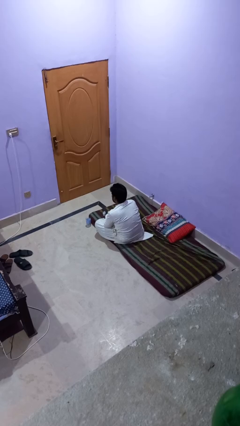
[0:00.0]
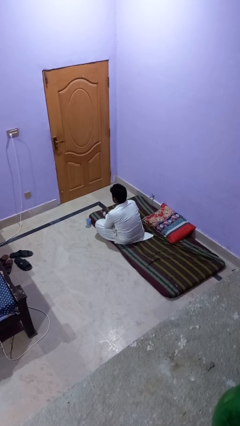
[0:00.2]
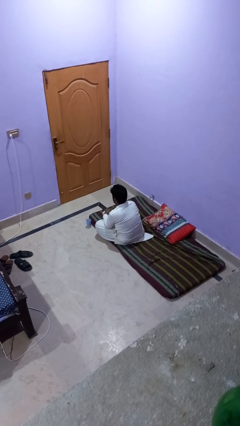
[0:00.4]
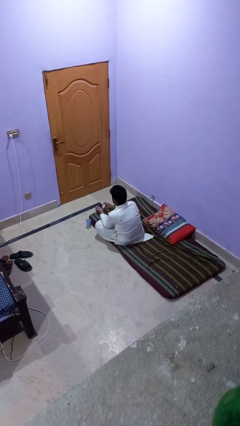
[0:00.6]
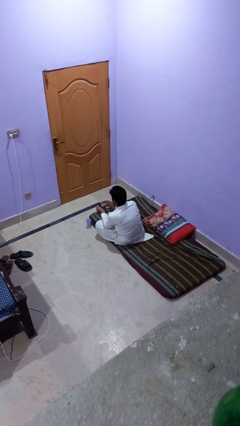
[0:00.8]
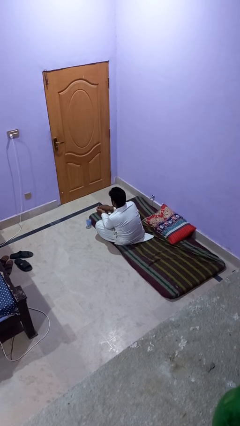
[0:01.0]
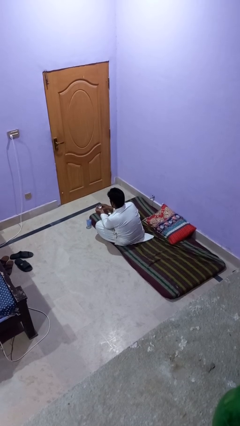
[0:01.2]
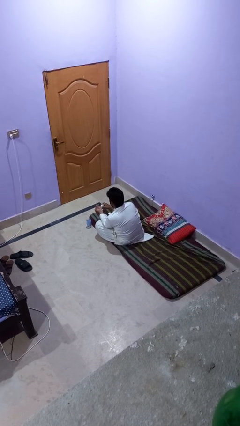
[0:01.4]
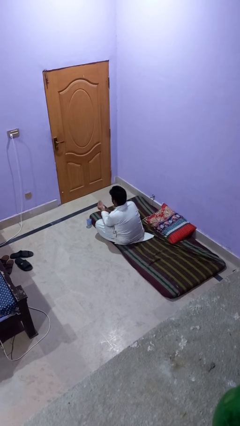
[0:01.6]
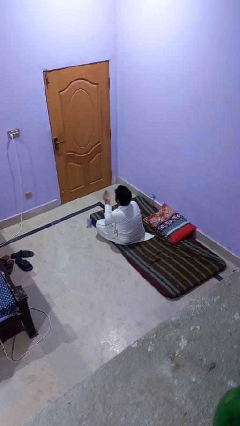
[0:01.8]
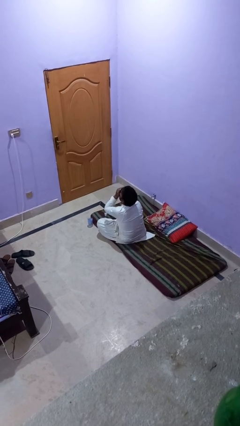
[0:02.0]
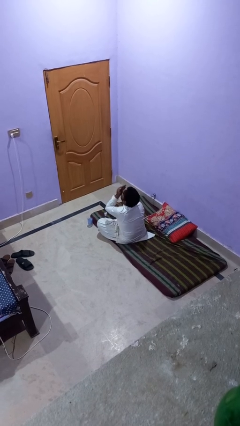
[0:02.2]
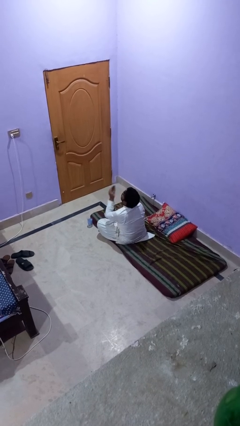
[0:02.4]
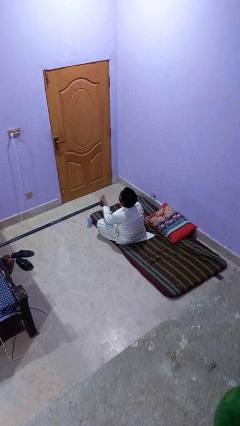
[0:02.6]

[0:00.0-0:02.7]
person takes medicine pills

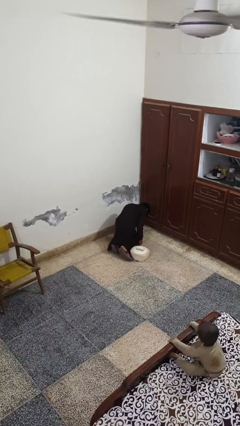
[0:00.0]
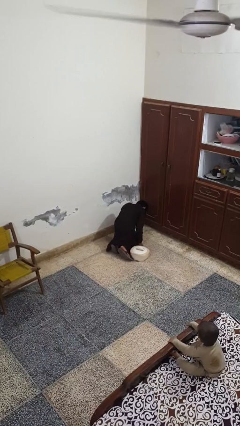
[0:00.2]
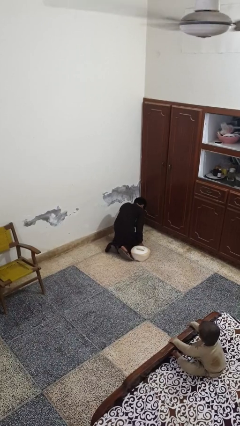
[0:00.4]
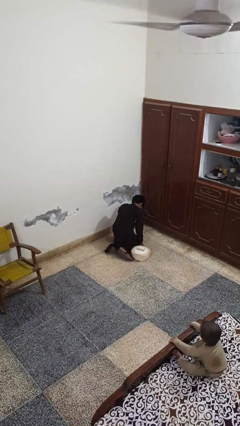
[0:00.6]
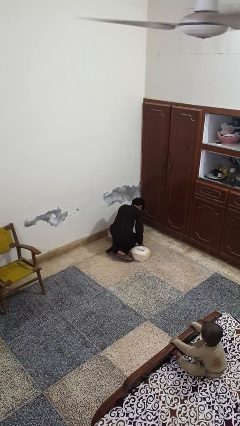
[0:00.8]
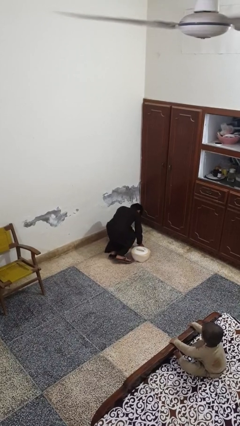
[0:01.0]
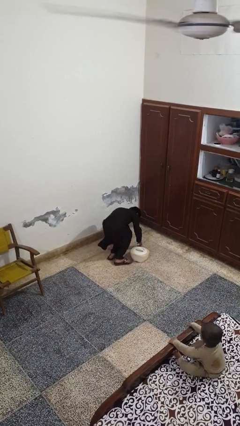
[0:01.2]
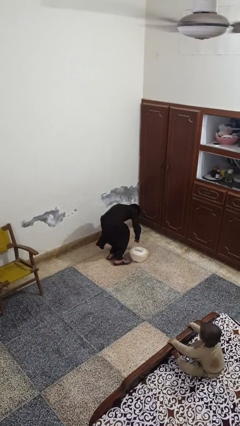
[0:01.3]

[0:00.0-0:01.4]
person lies down on floor

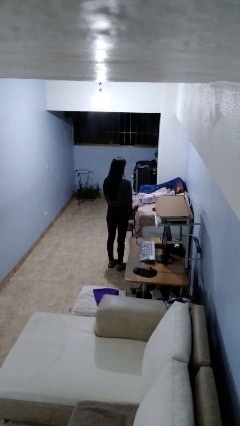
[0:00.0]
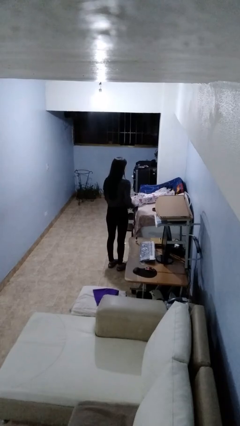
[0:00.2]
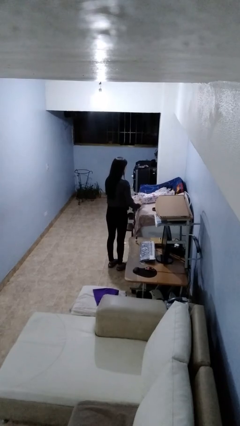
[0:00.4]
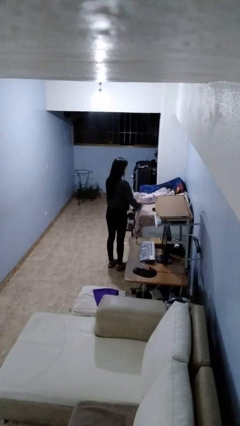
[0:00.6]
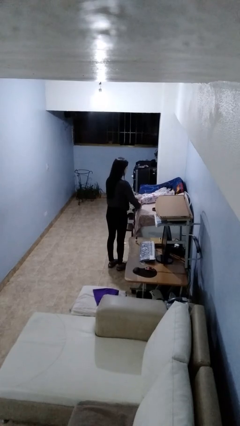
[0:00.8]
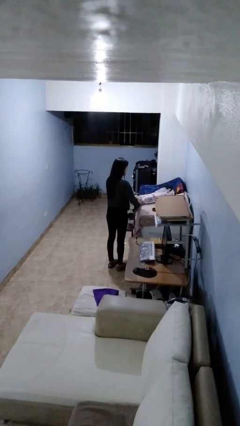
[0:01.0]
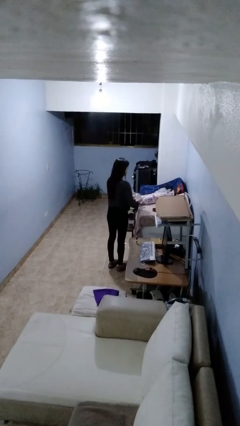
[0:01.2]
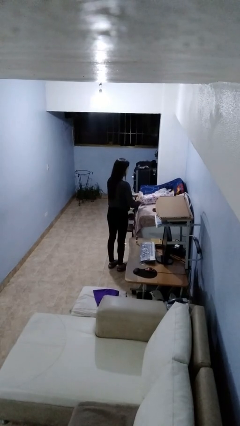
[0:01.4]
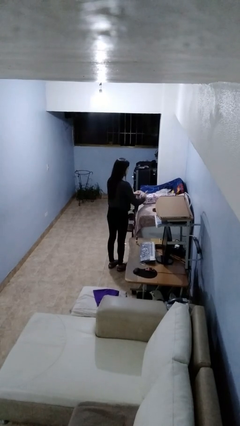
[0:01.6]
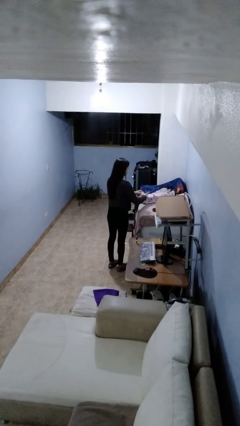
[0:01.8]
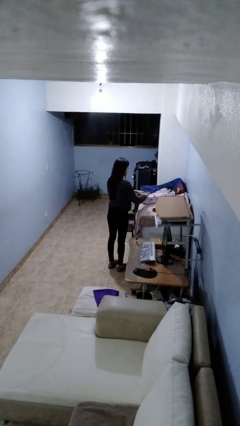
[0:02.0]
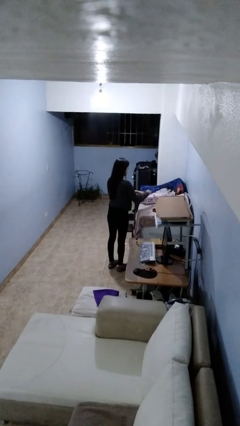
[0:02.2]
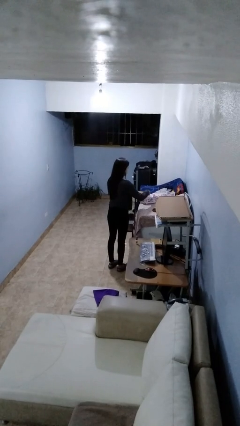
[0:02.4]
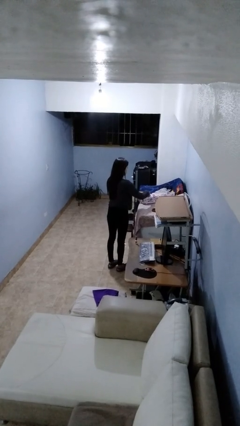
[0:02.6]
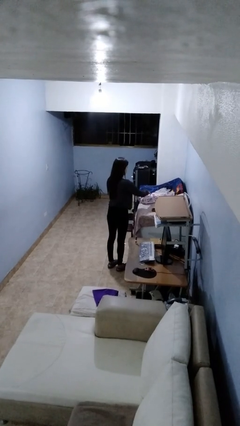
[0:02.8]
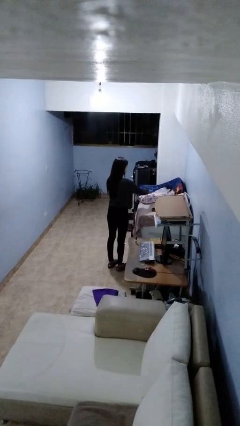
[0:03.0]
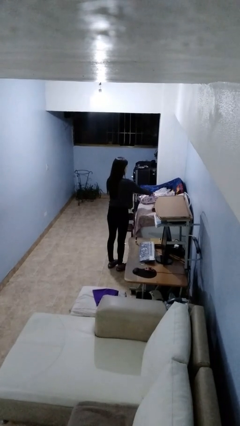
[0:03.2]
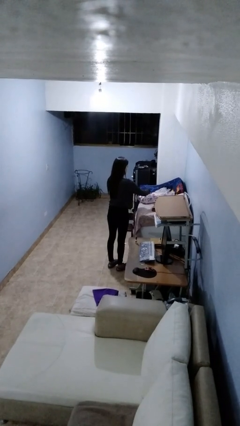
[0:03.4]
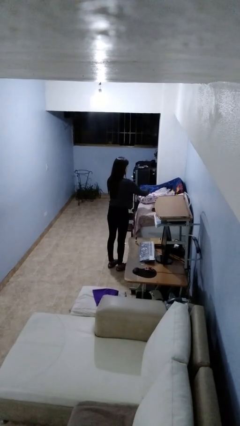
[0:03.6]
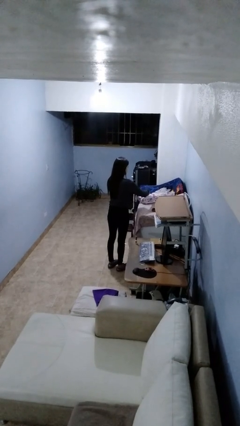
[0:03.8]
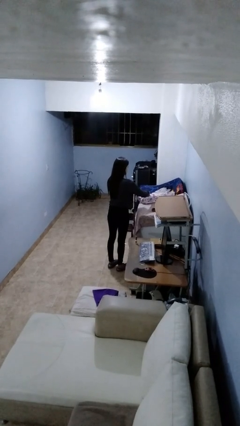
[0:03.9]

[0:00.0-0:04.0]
person wraps box

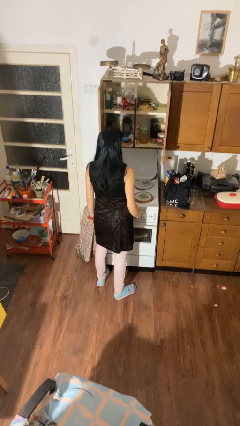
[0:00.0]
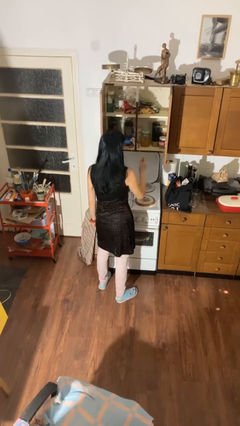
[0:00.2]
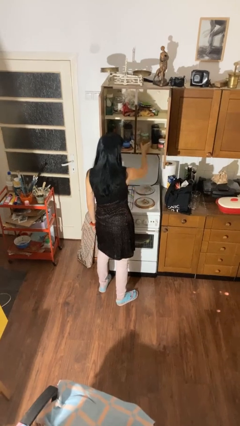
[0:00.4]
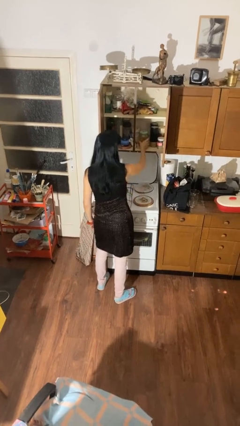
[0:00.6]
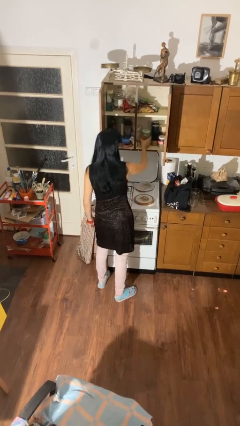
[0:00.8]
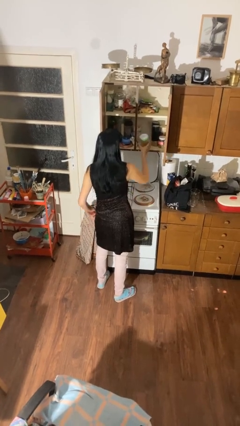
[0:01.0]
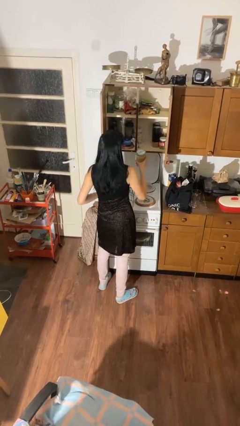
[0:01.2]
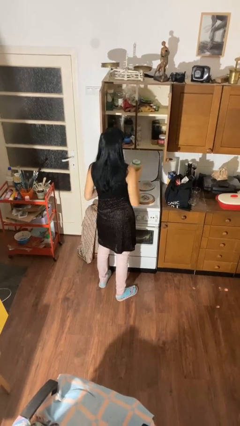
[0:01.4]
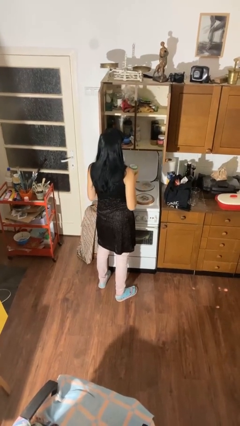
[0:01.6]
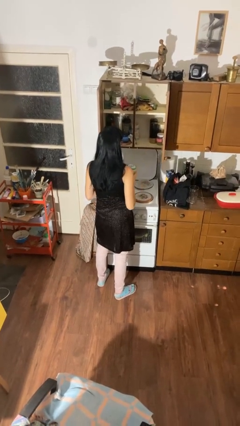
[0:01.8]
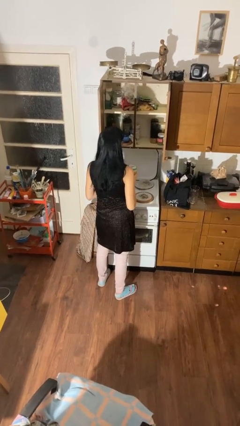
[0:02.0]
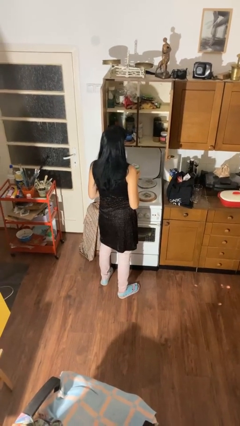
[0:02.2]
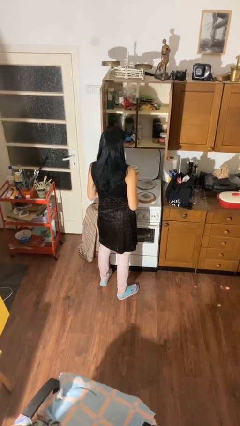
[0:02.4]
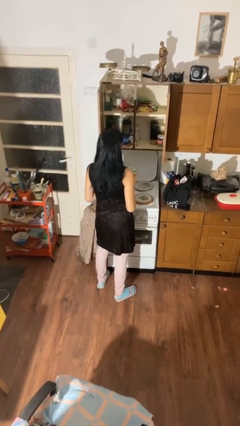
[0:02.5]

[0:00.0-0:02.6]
person picks up object from cabinet

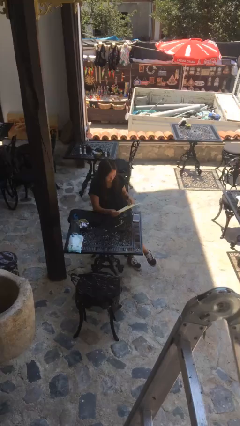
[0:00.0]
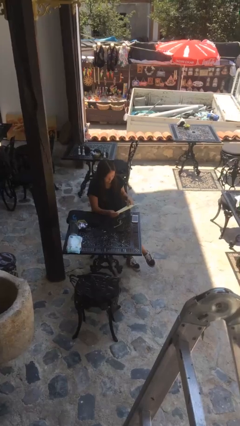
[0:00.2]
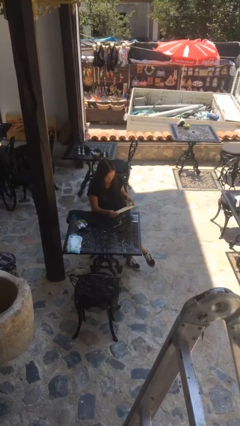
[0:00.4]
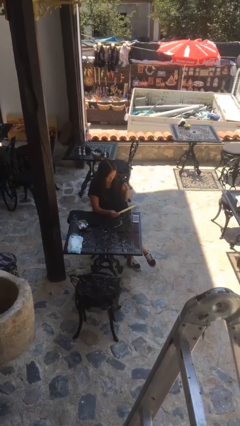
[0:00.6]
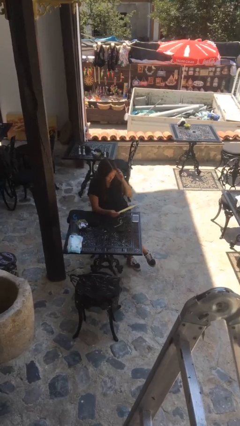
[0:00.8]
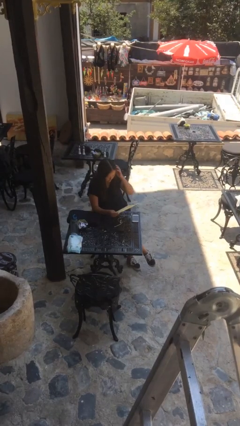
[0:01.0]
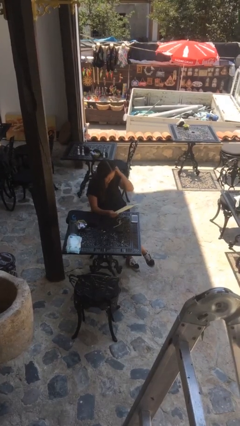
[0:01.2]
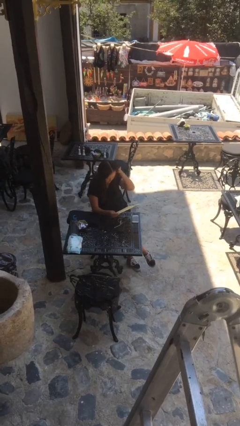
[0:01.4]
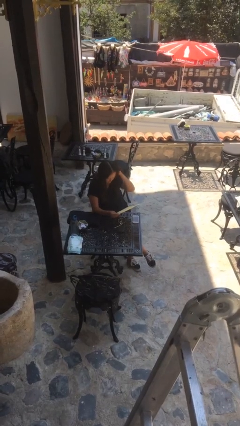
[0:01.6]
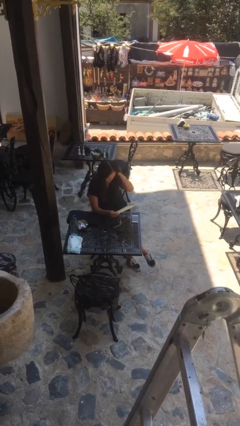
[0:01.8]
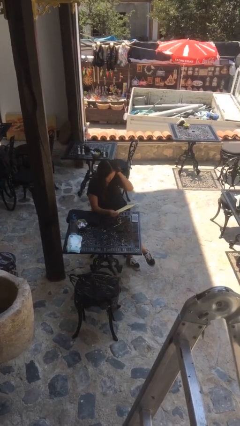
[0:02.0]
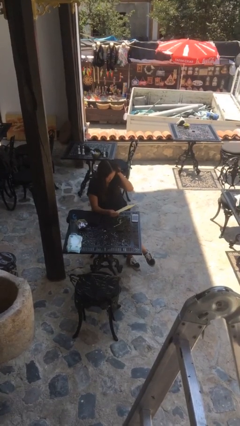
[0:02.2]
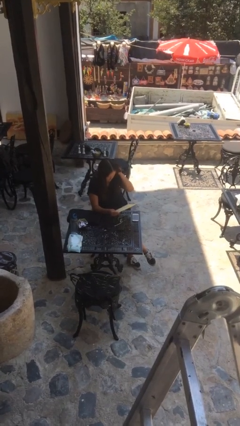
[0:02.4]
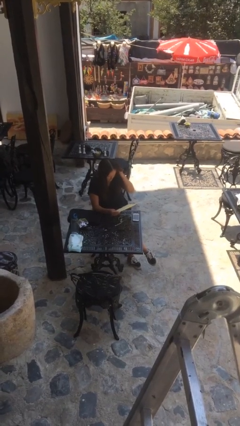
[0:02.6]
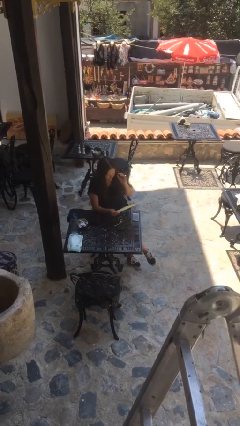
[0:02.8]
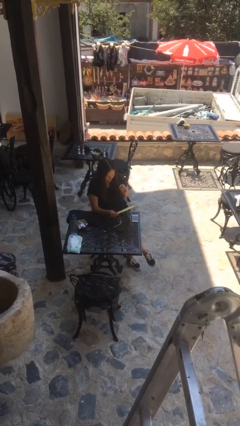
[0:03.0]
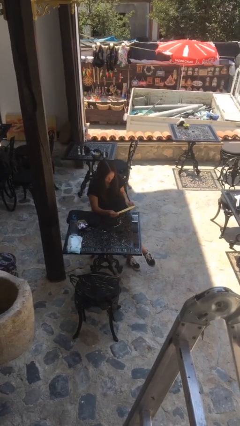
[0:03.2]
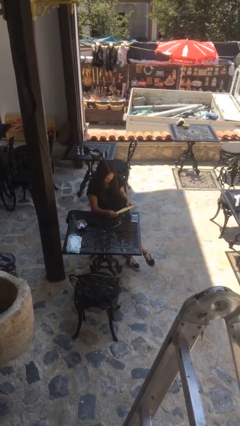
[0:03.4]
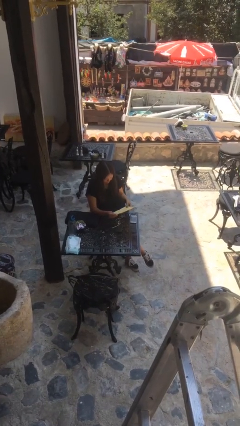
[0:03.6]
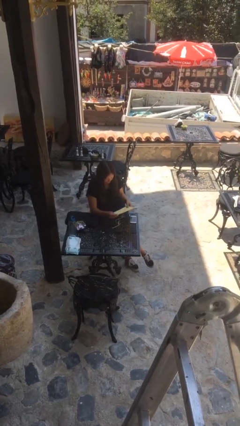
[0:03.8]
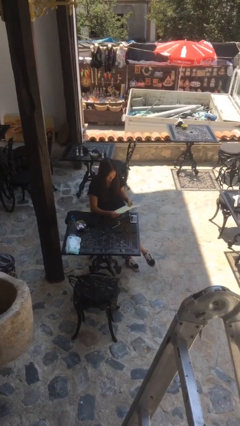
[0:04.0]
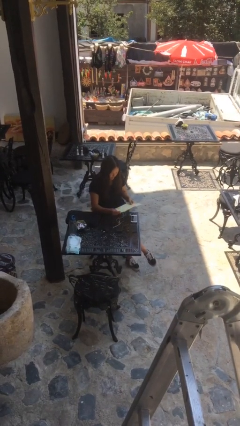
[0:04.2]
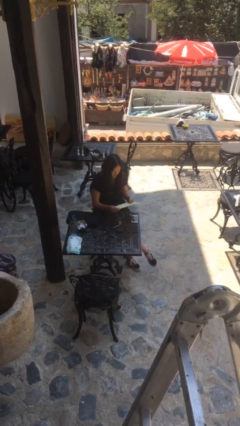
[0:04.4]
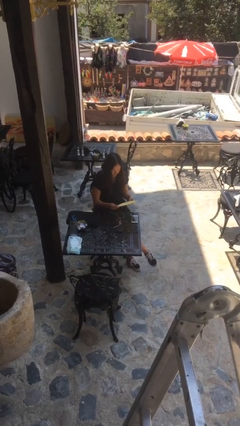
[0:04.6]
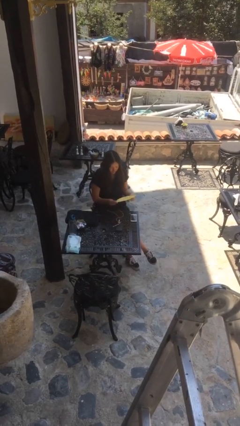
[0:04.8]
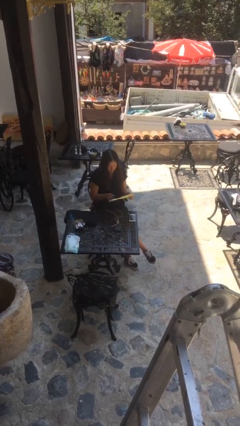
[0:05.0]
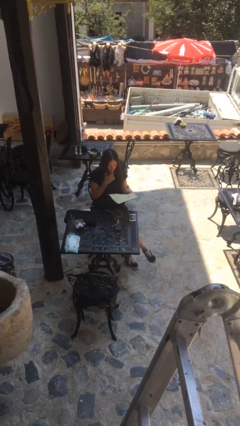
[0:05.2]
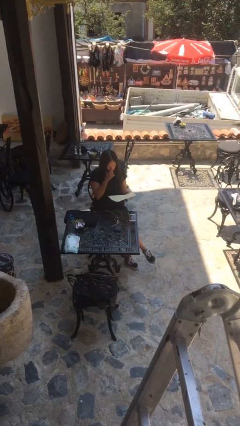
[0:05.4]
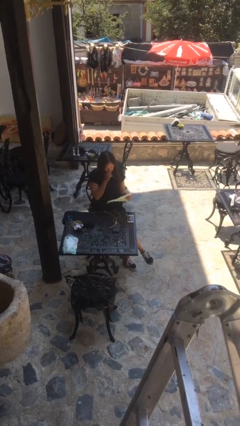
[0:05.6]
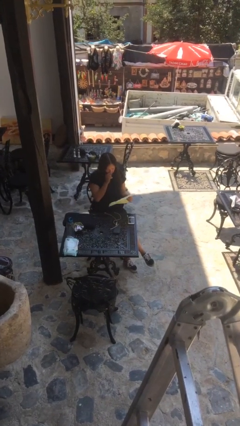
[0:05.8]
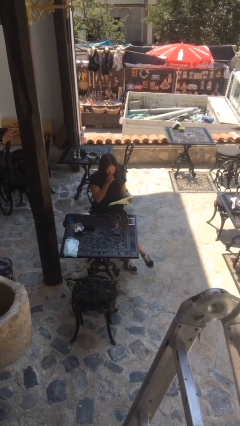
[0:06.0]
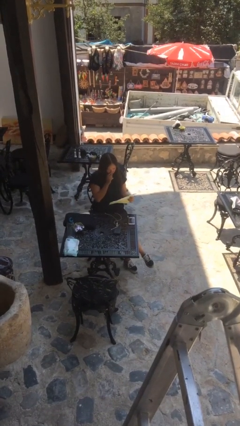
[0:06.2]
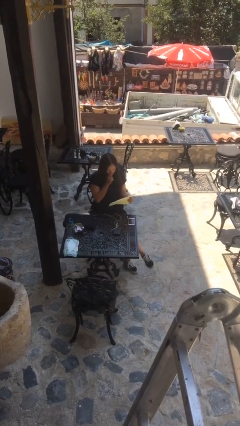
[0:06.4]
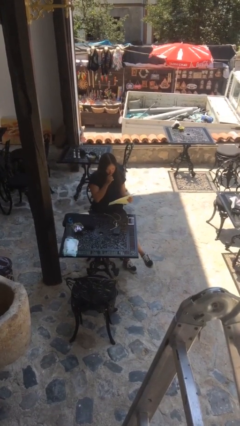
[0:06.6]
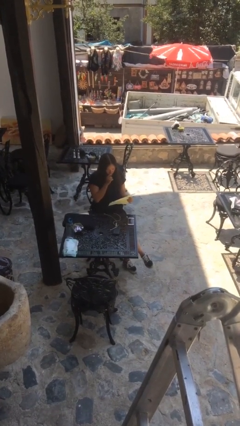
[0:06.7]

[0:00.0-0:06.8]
person reads document

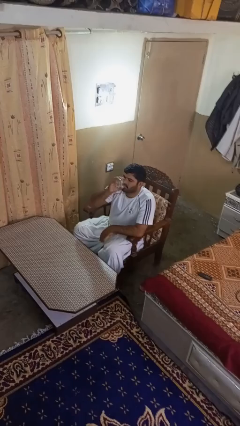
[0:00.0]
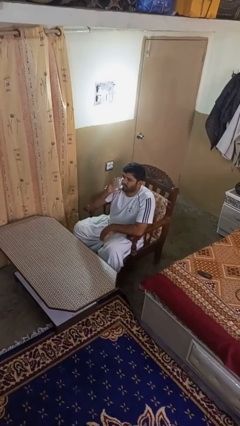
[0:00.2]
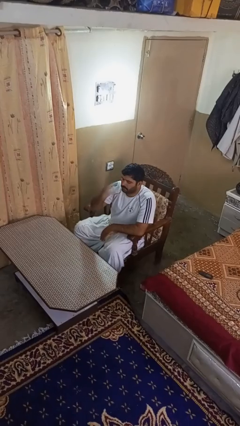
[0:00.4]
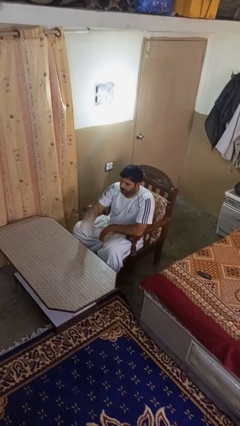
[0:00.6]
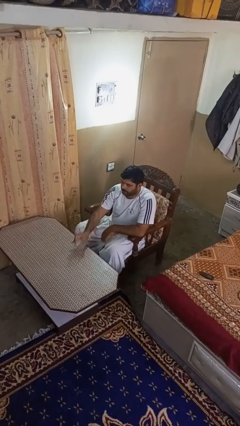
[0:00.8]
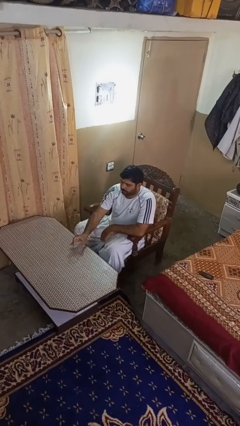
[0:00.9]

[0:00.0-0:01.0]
person puts down object on table
